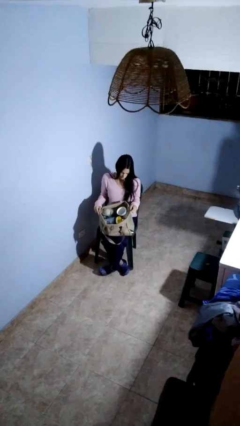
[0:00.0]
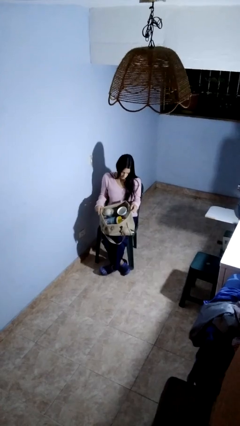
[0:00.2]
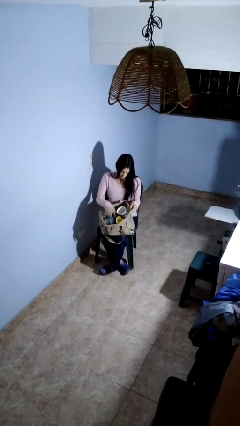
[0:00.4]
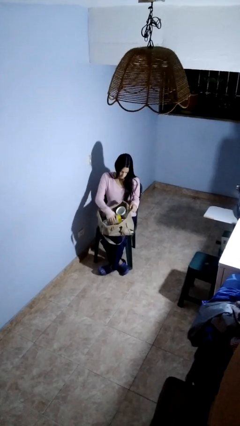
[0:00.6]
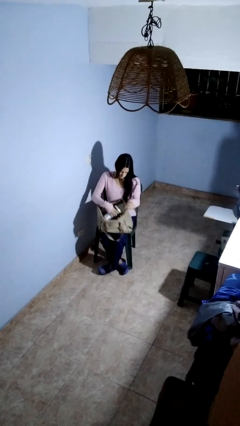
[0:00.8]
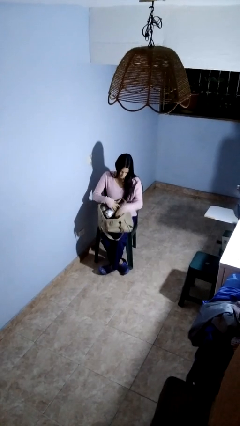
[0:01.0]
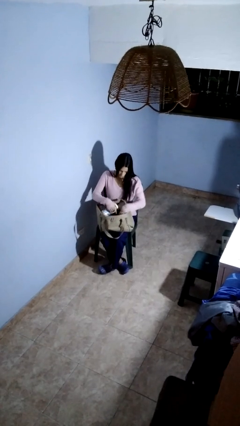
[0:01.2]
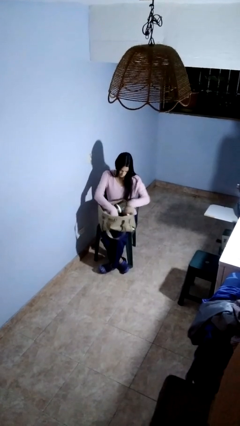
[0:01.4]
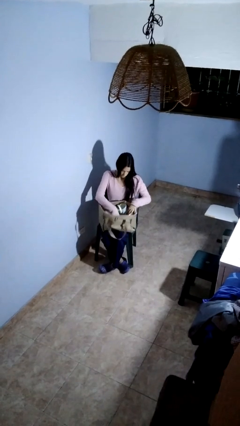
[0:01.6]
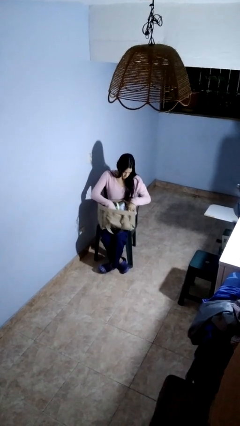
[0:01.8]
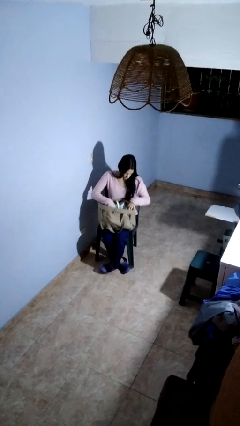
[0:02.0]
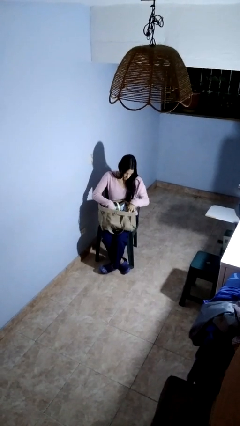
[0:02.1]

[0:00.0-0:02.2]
person searches in bag

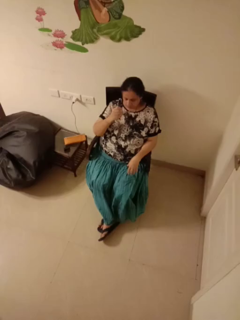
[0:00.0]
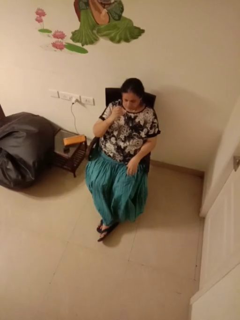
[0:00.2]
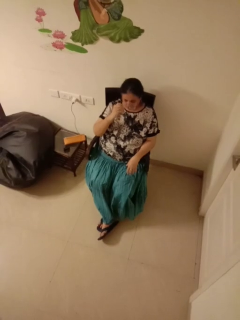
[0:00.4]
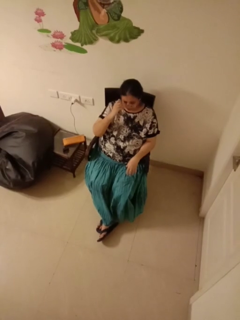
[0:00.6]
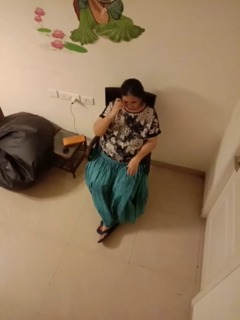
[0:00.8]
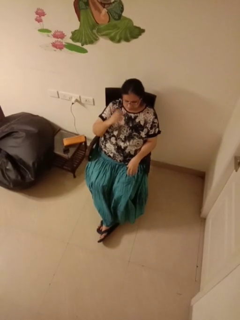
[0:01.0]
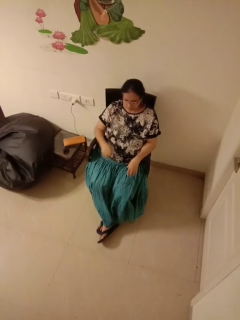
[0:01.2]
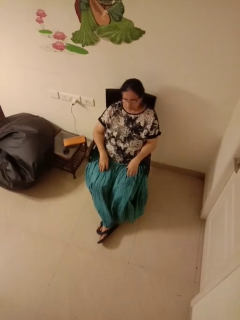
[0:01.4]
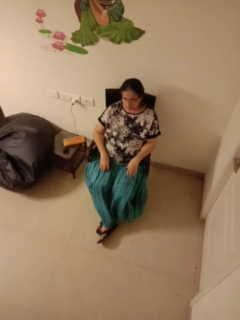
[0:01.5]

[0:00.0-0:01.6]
person puts on glasses

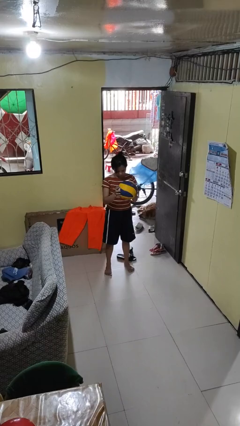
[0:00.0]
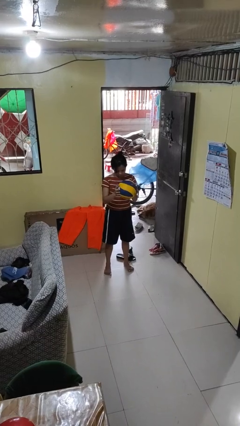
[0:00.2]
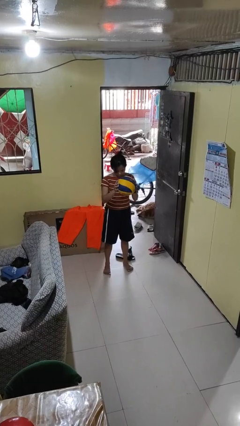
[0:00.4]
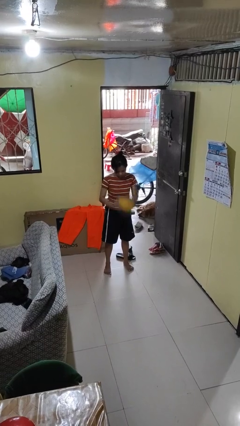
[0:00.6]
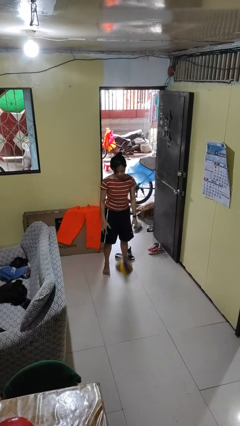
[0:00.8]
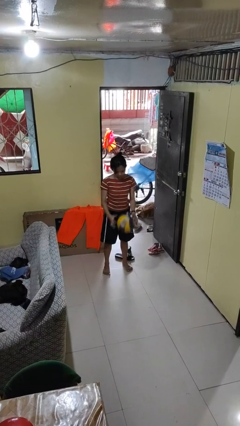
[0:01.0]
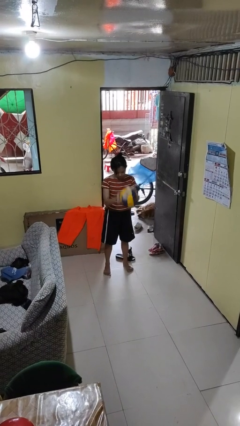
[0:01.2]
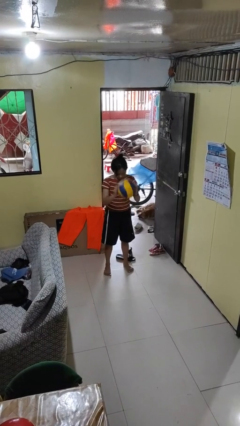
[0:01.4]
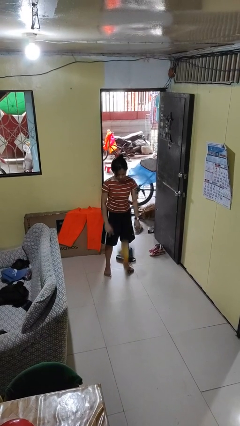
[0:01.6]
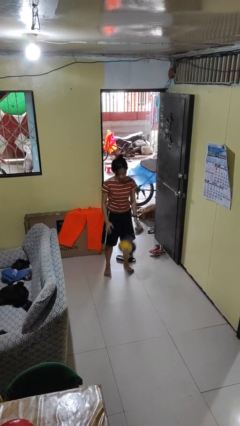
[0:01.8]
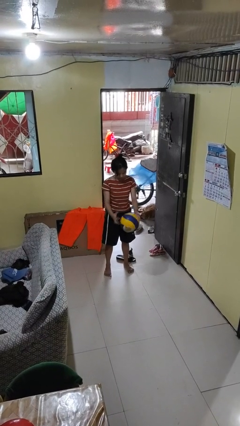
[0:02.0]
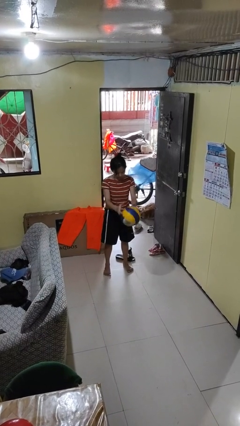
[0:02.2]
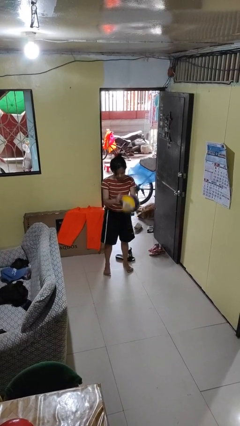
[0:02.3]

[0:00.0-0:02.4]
person bounces ball on floor

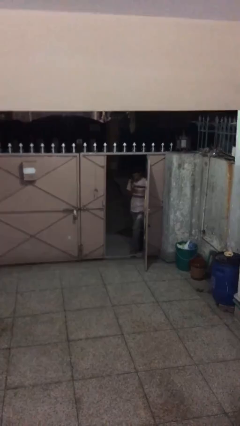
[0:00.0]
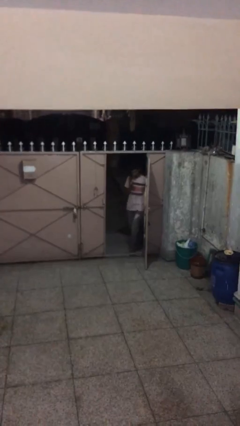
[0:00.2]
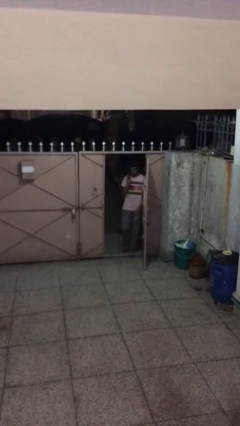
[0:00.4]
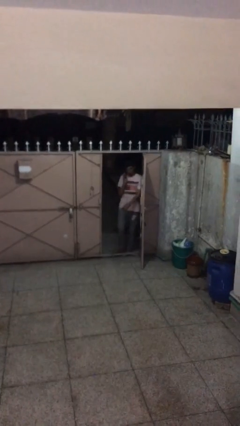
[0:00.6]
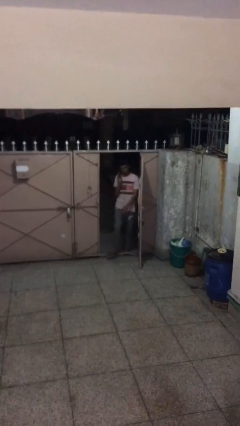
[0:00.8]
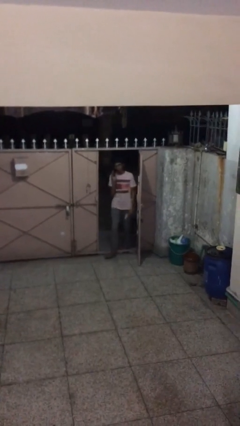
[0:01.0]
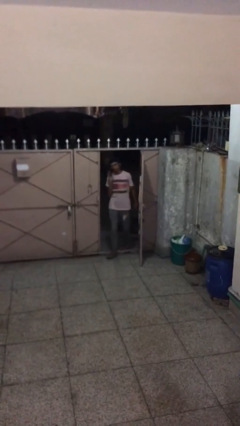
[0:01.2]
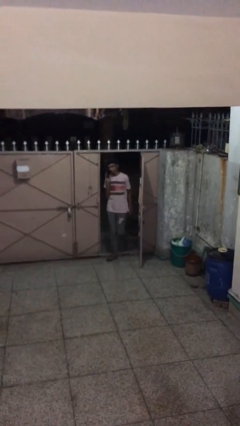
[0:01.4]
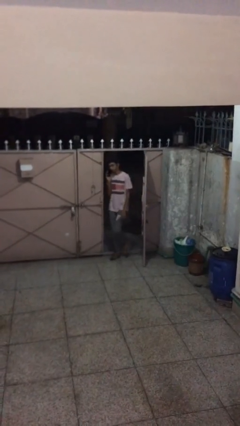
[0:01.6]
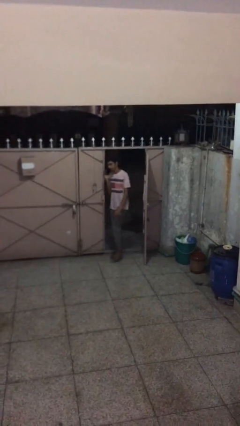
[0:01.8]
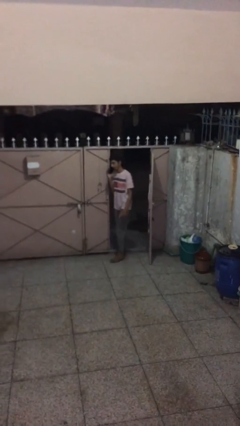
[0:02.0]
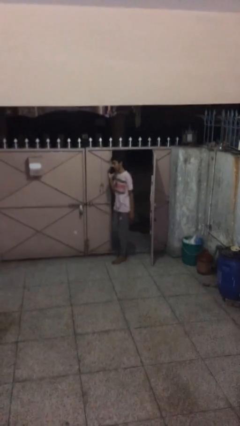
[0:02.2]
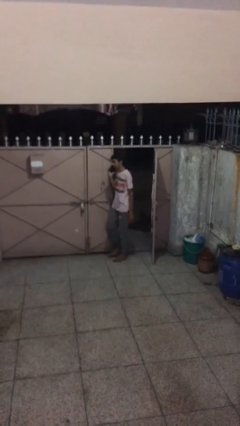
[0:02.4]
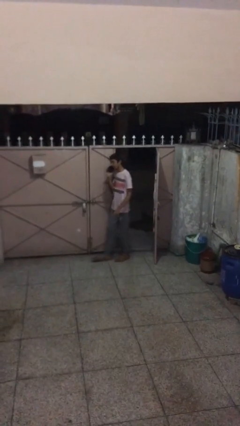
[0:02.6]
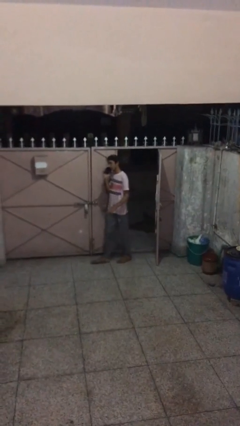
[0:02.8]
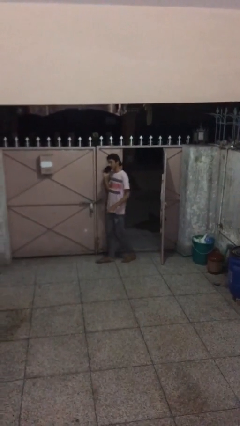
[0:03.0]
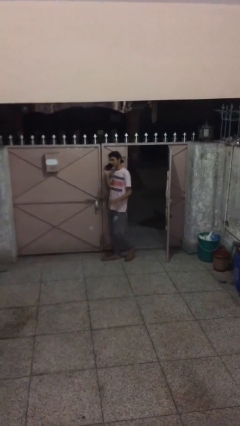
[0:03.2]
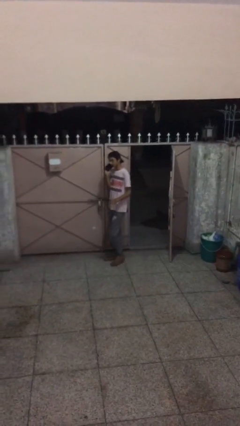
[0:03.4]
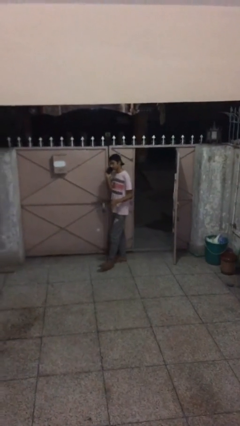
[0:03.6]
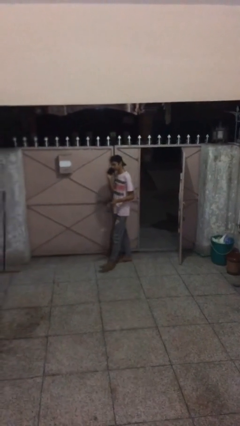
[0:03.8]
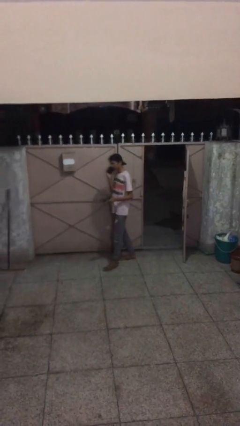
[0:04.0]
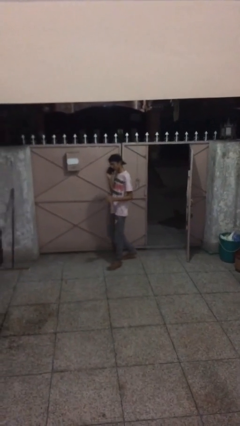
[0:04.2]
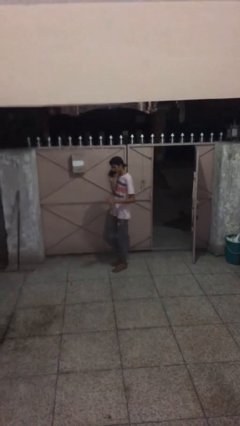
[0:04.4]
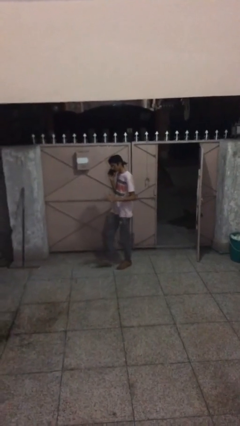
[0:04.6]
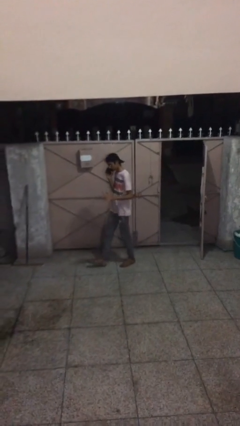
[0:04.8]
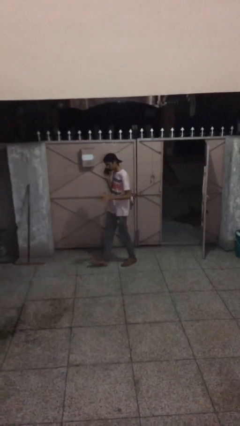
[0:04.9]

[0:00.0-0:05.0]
person enters scene through structure

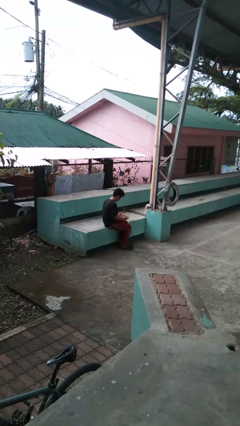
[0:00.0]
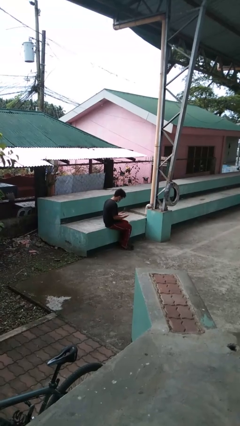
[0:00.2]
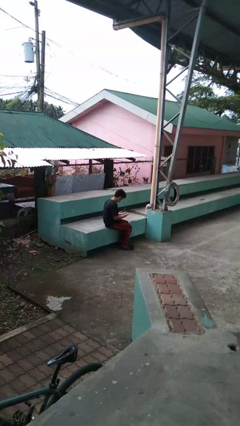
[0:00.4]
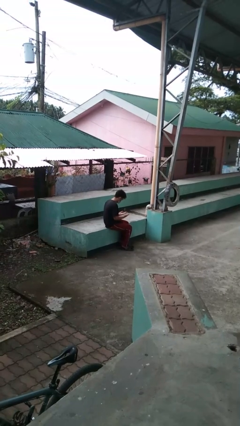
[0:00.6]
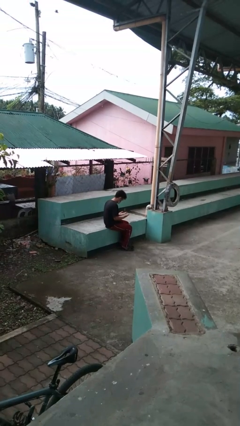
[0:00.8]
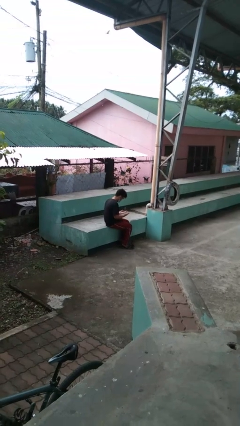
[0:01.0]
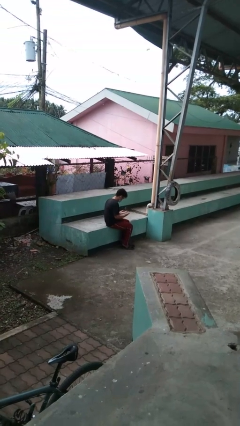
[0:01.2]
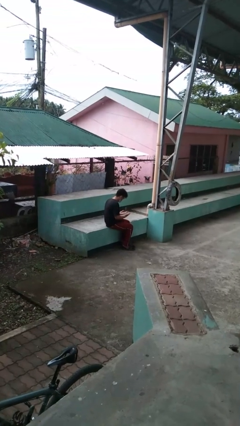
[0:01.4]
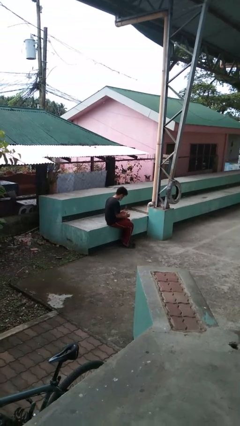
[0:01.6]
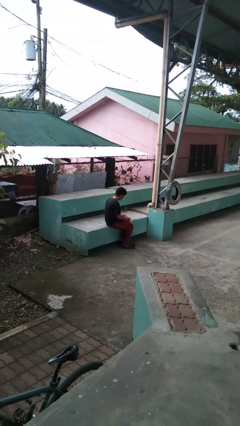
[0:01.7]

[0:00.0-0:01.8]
person looks at hands in lap

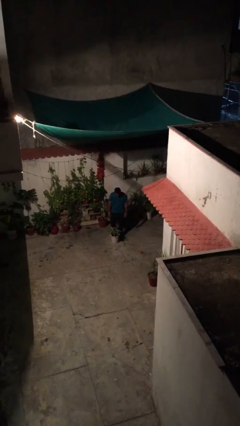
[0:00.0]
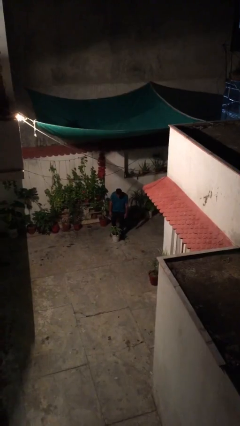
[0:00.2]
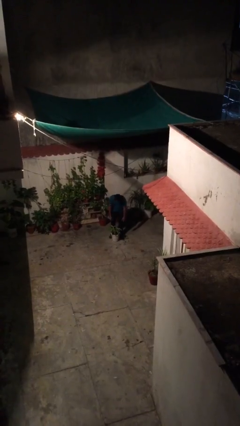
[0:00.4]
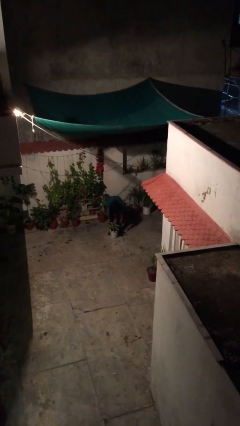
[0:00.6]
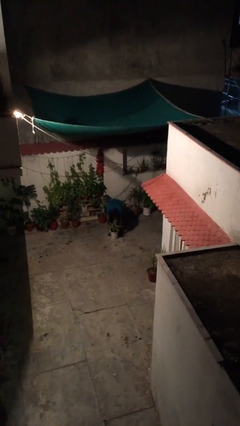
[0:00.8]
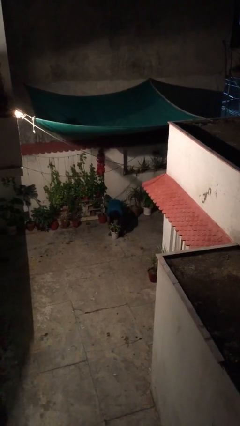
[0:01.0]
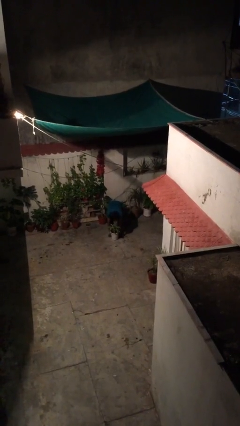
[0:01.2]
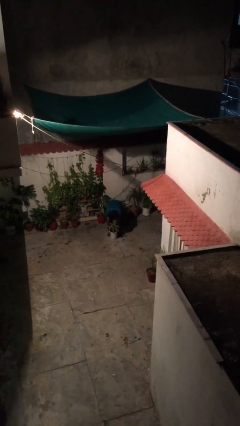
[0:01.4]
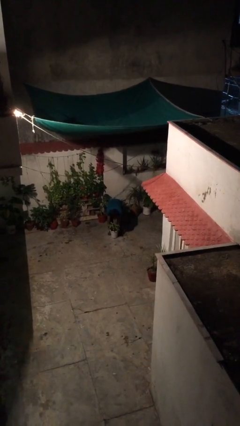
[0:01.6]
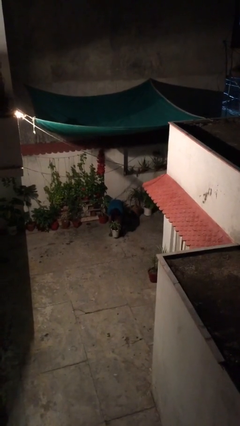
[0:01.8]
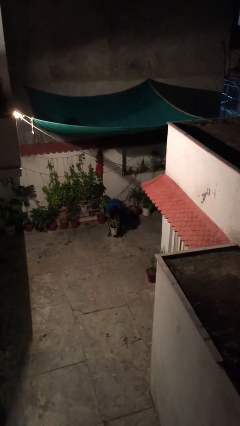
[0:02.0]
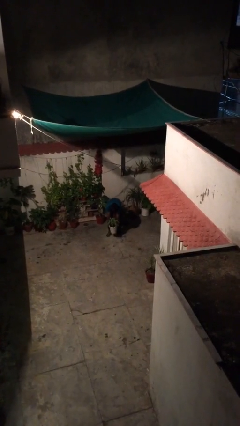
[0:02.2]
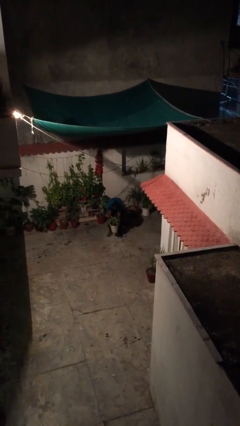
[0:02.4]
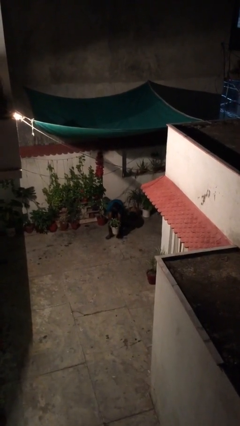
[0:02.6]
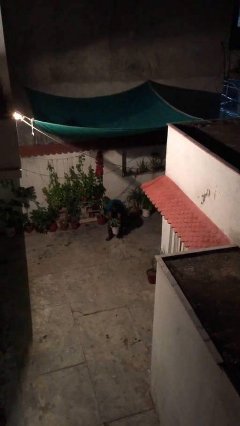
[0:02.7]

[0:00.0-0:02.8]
person picks up object from floor

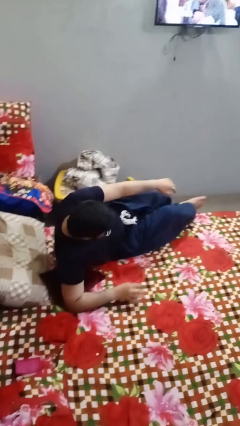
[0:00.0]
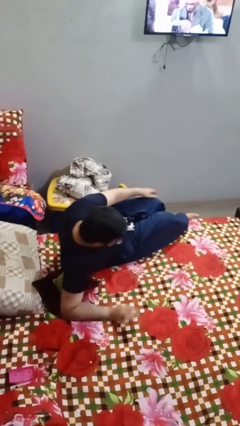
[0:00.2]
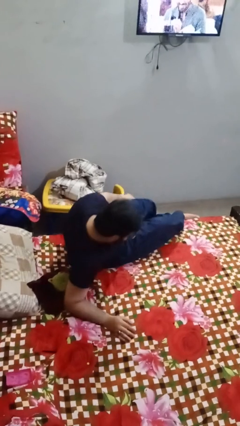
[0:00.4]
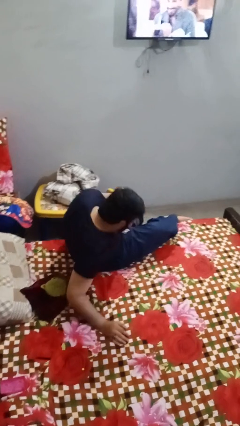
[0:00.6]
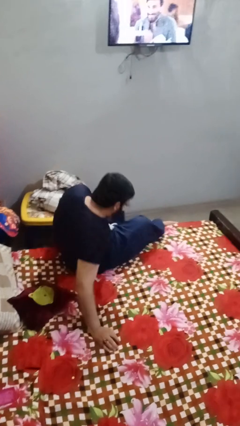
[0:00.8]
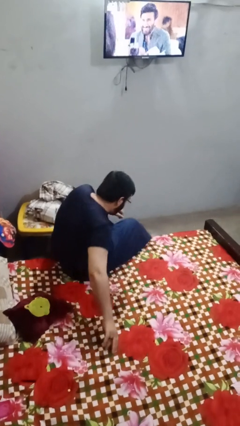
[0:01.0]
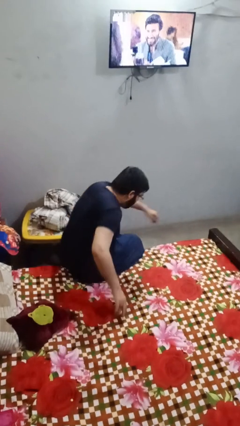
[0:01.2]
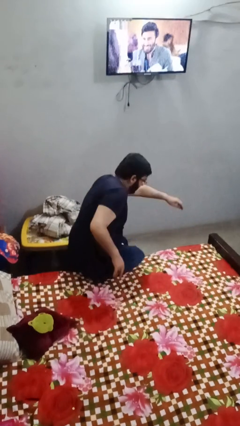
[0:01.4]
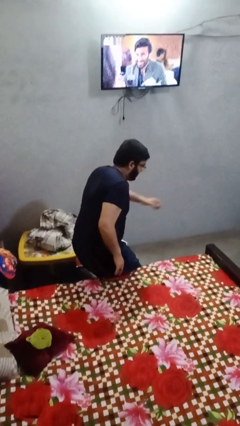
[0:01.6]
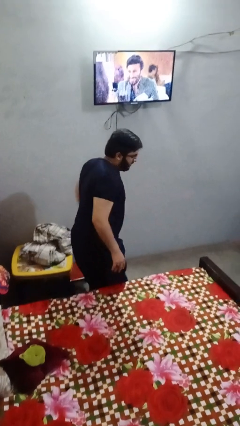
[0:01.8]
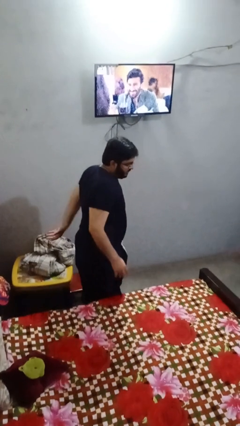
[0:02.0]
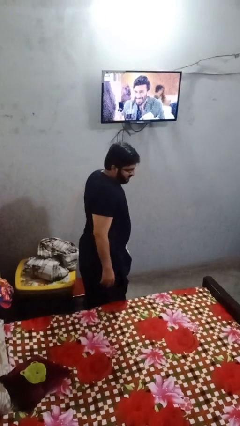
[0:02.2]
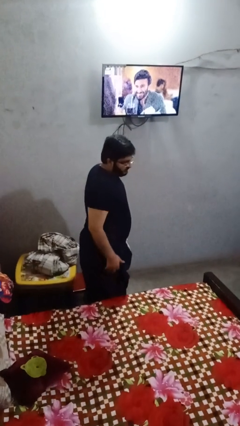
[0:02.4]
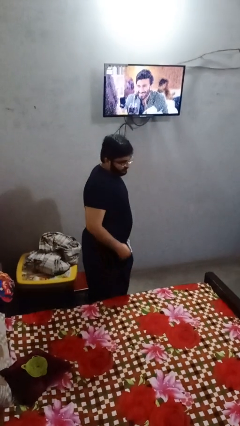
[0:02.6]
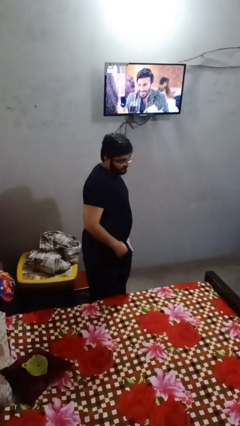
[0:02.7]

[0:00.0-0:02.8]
person stands up
